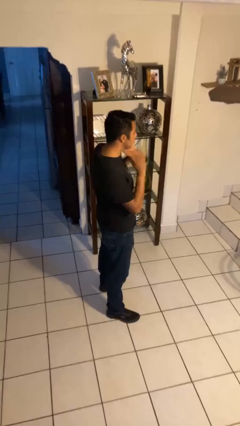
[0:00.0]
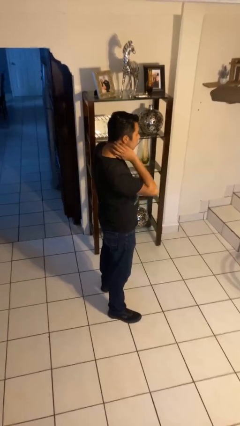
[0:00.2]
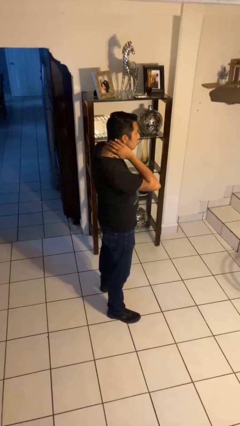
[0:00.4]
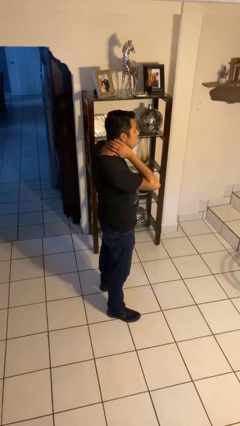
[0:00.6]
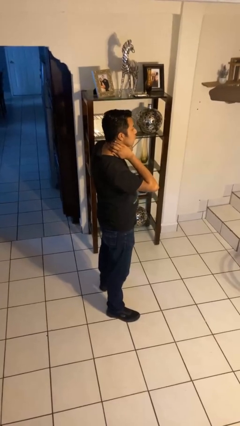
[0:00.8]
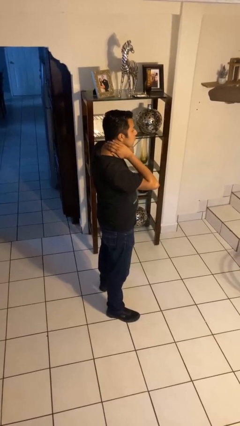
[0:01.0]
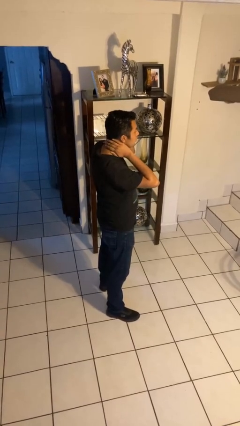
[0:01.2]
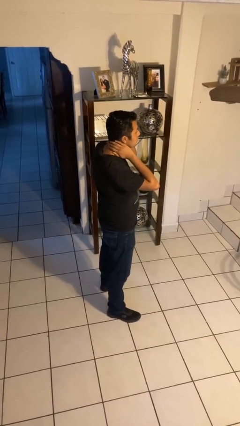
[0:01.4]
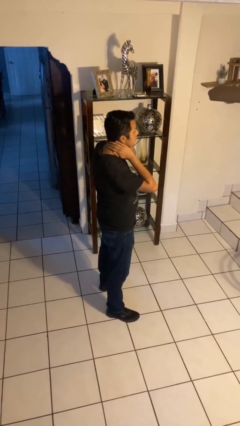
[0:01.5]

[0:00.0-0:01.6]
person rubs neck

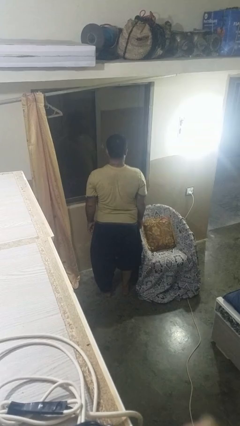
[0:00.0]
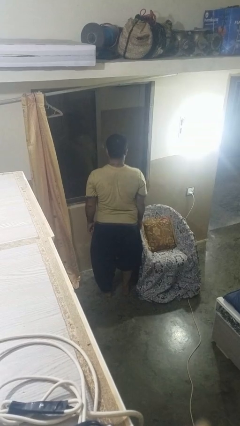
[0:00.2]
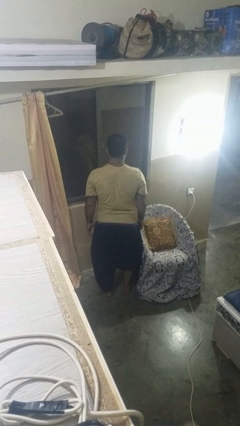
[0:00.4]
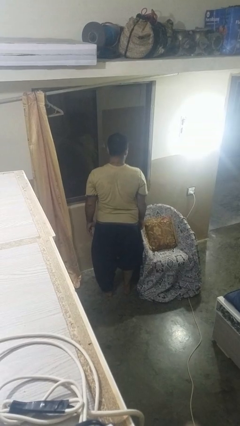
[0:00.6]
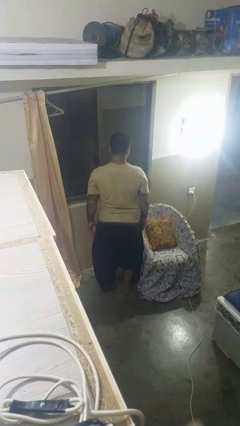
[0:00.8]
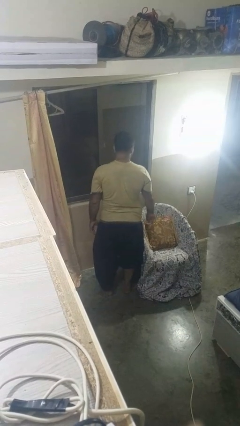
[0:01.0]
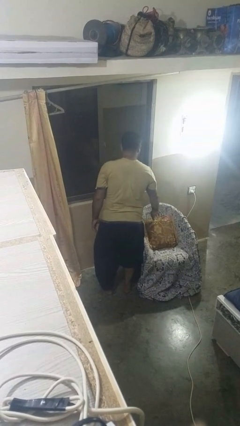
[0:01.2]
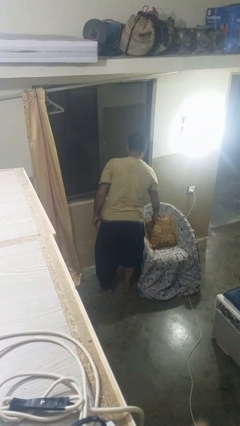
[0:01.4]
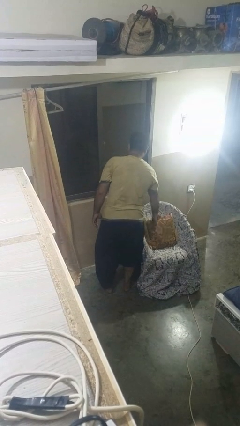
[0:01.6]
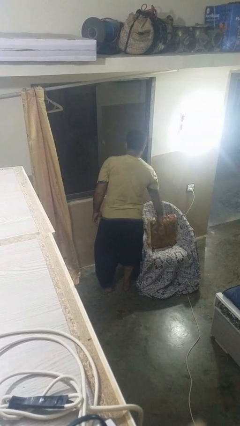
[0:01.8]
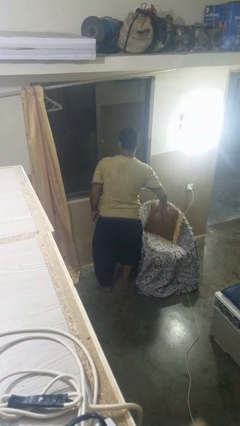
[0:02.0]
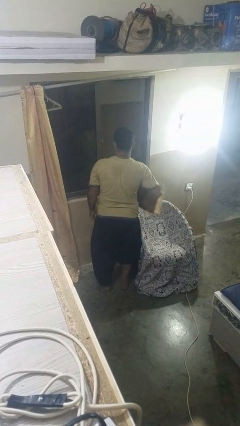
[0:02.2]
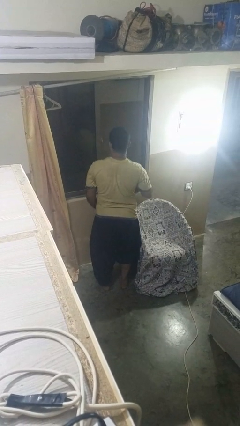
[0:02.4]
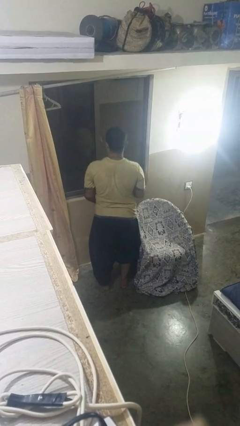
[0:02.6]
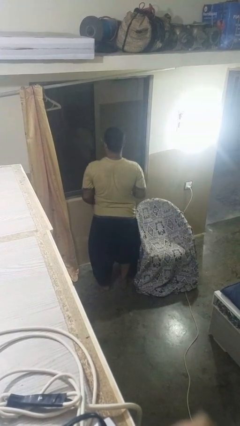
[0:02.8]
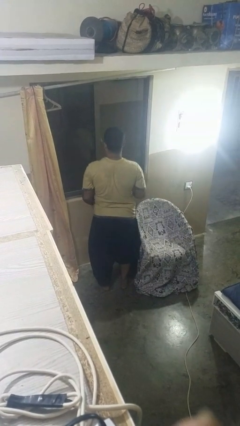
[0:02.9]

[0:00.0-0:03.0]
person picks up object from couch

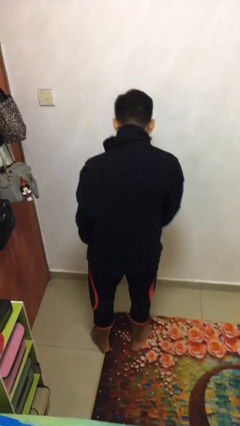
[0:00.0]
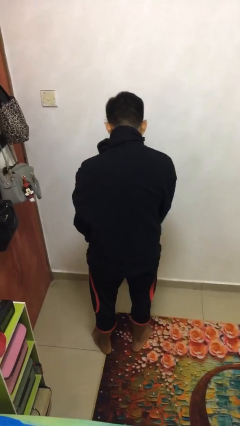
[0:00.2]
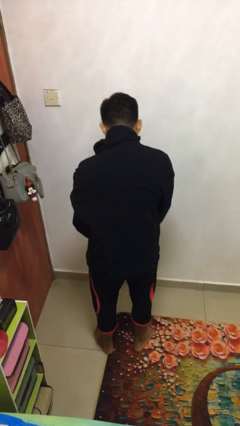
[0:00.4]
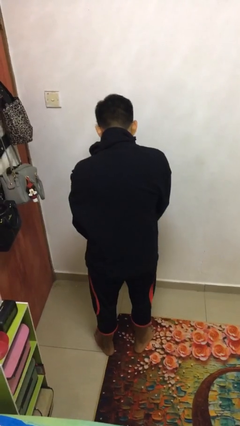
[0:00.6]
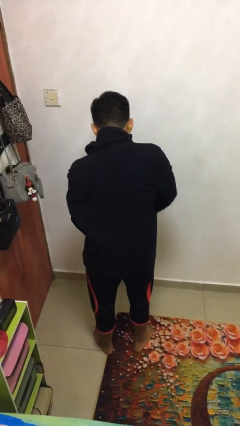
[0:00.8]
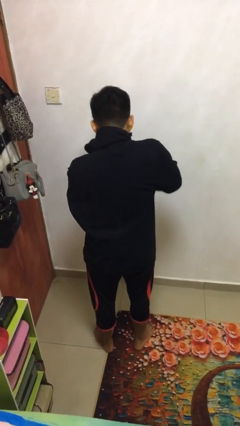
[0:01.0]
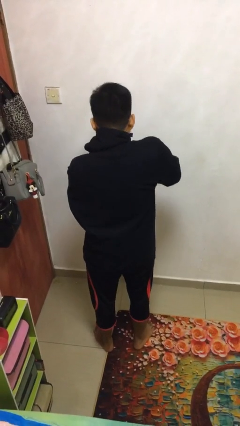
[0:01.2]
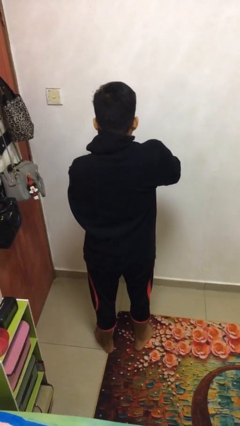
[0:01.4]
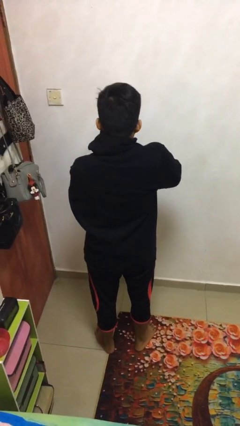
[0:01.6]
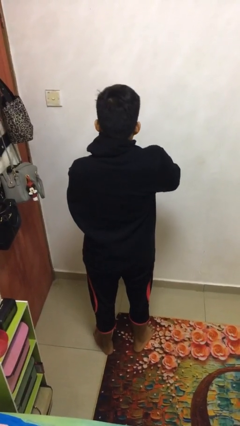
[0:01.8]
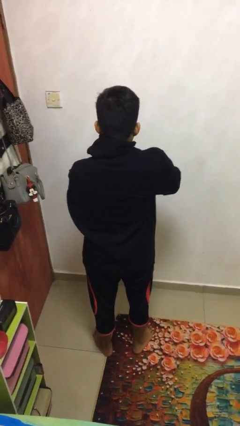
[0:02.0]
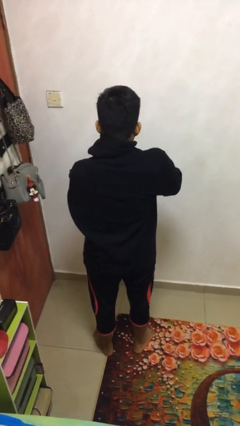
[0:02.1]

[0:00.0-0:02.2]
person zips up jacket

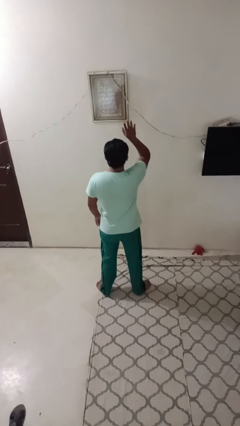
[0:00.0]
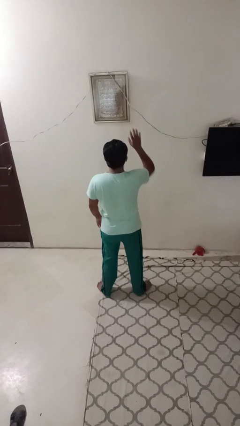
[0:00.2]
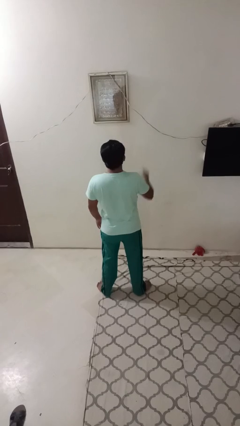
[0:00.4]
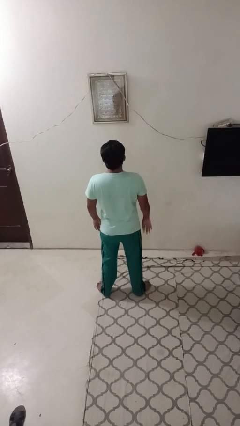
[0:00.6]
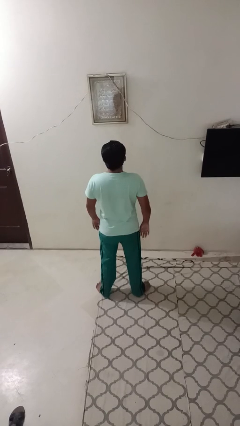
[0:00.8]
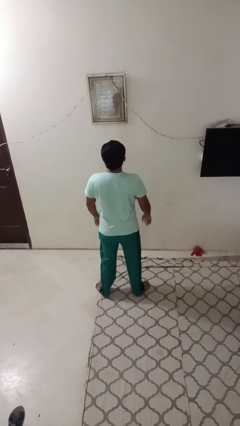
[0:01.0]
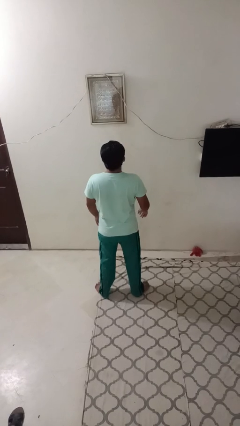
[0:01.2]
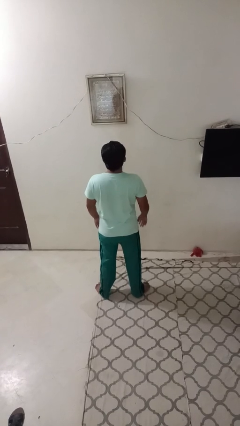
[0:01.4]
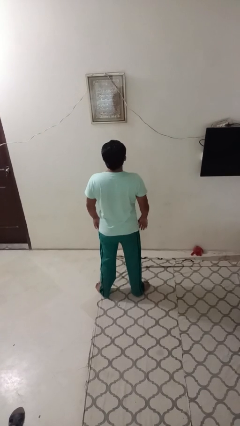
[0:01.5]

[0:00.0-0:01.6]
person gestures lower hand

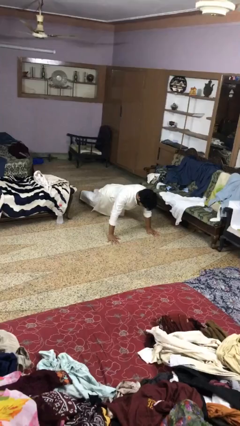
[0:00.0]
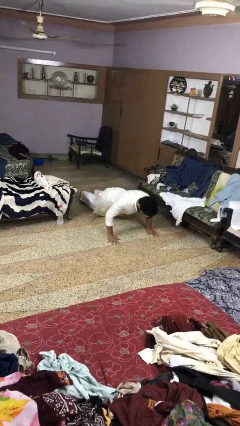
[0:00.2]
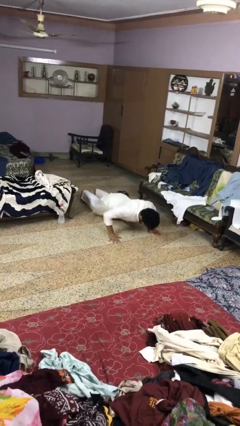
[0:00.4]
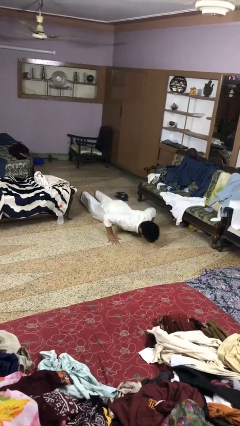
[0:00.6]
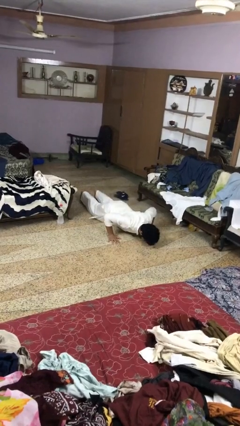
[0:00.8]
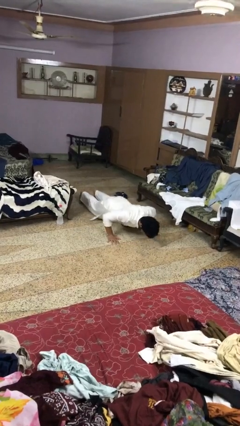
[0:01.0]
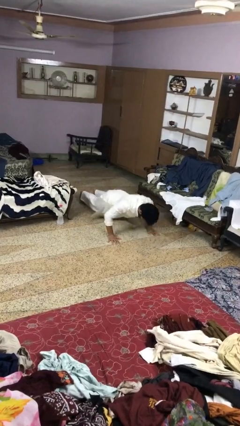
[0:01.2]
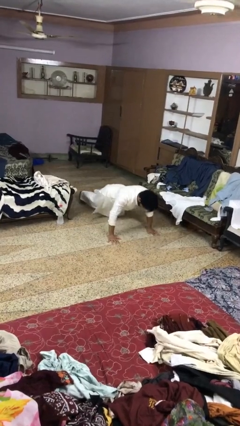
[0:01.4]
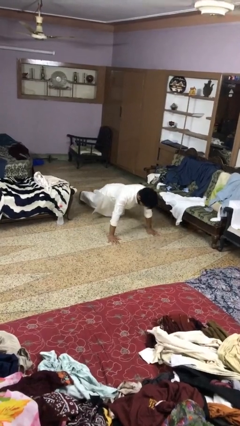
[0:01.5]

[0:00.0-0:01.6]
person exercises with pushup

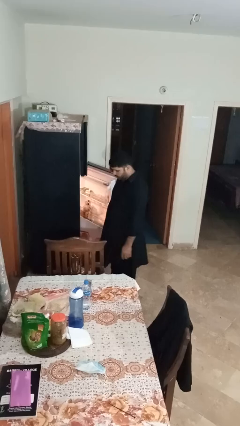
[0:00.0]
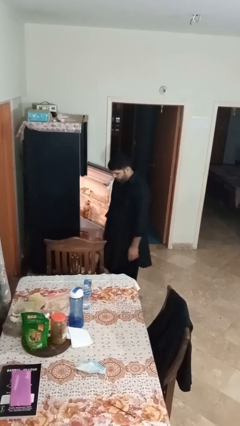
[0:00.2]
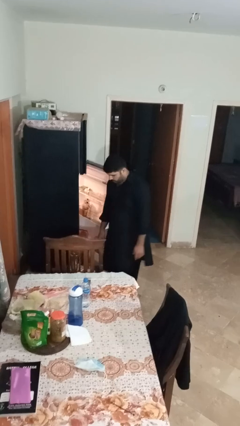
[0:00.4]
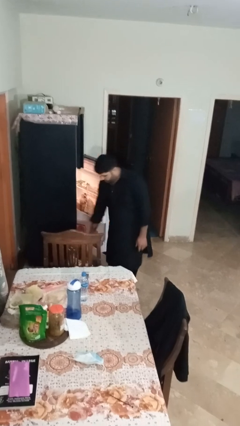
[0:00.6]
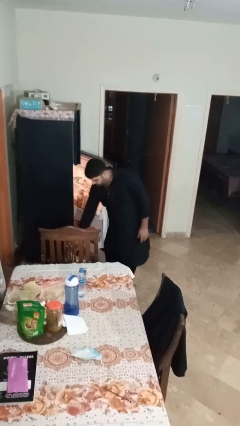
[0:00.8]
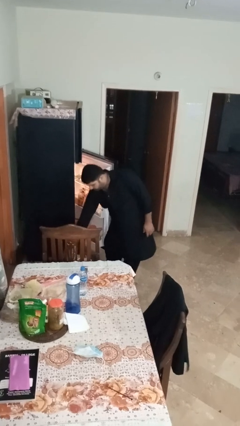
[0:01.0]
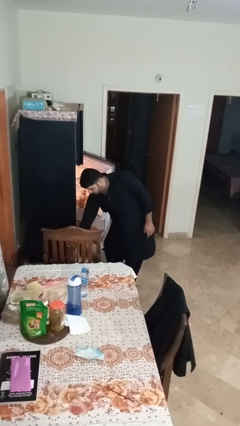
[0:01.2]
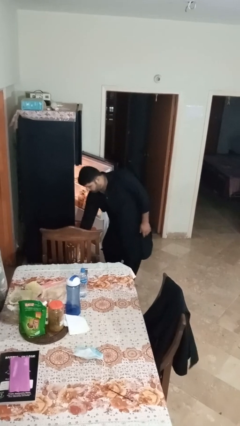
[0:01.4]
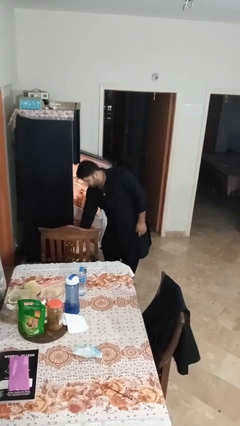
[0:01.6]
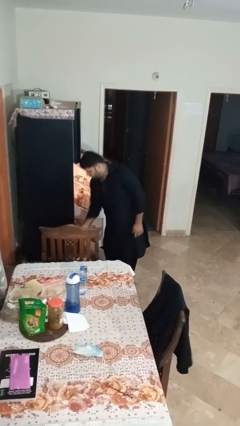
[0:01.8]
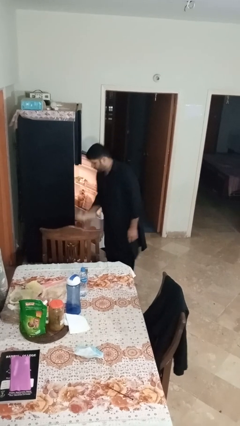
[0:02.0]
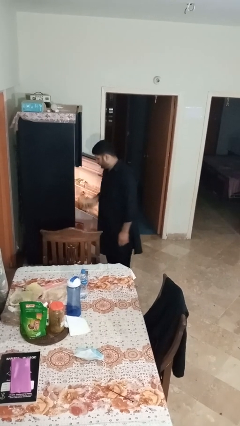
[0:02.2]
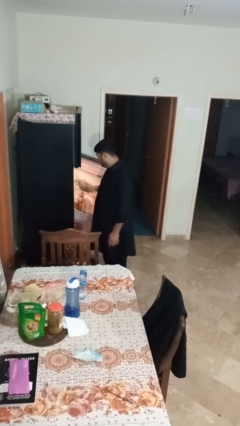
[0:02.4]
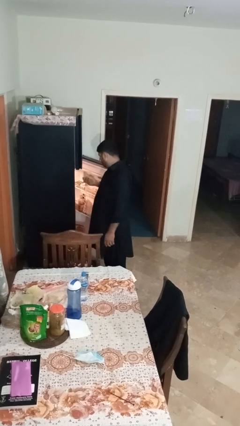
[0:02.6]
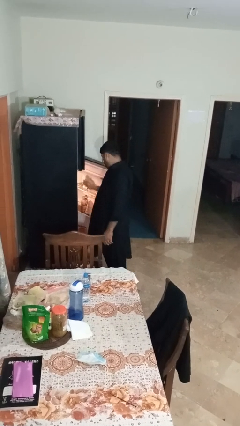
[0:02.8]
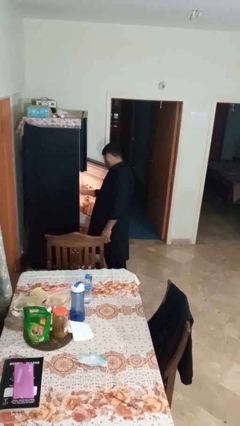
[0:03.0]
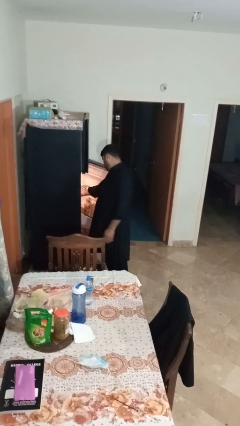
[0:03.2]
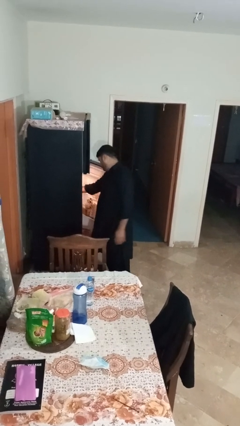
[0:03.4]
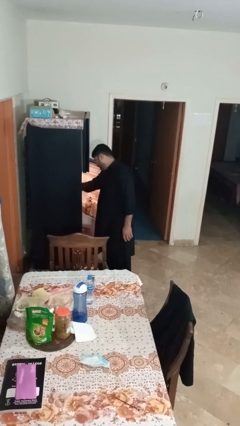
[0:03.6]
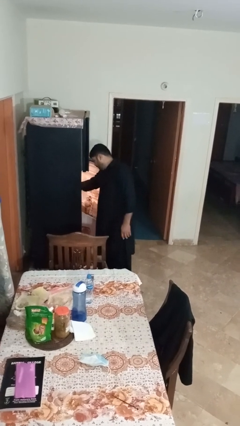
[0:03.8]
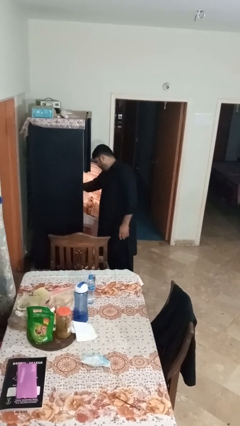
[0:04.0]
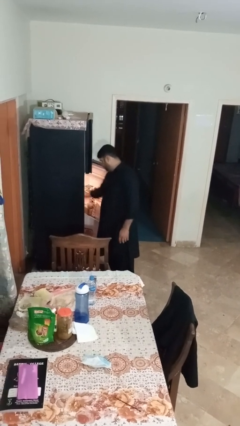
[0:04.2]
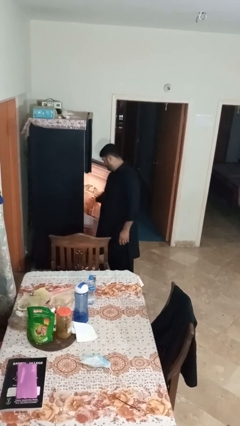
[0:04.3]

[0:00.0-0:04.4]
person loads groceries into refrigerator

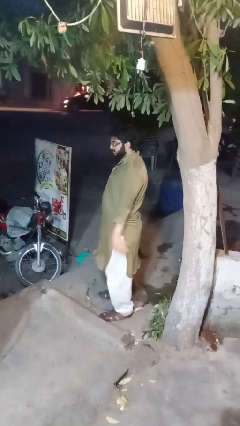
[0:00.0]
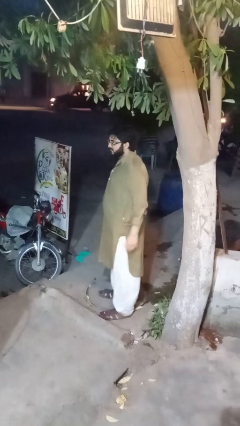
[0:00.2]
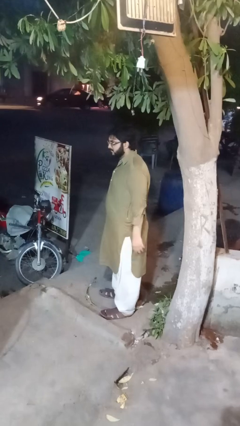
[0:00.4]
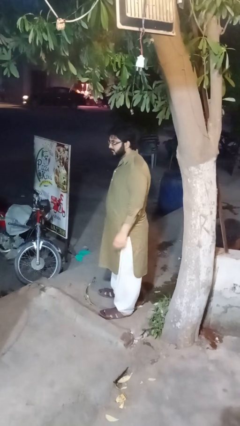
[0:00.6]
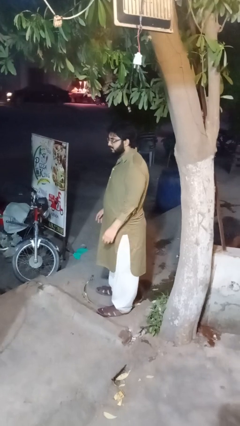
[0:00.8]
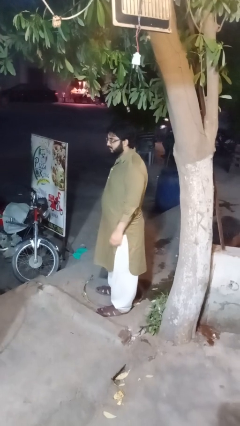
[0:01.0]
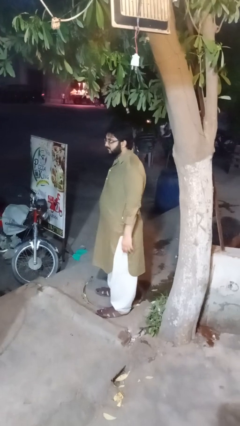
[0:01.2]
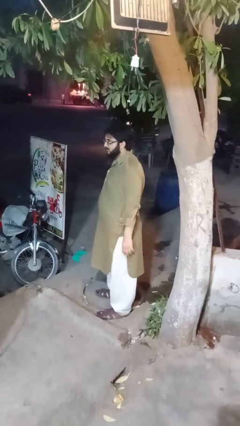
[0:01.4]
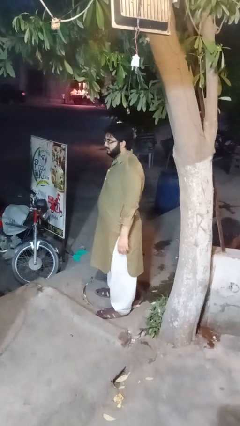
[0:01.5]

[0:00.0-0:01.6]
person jumps

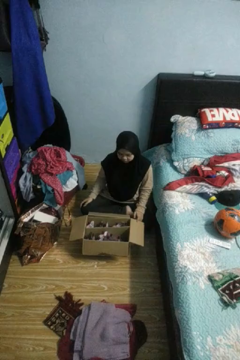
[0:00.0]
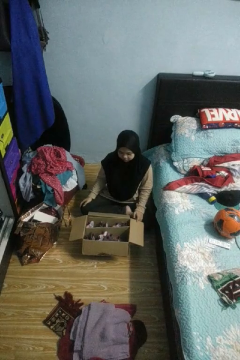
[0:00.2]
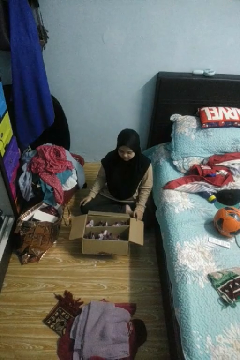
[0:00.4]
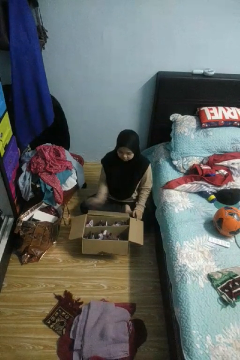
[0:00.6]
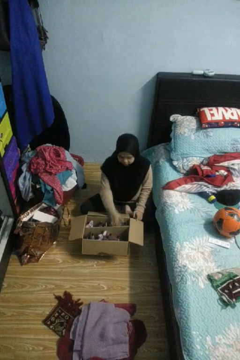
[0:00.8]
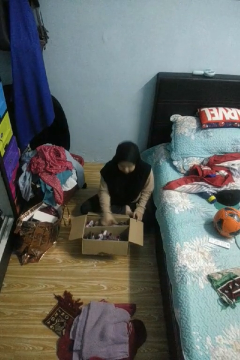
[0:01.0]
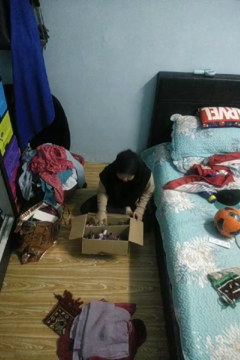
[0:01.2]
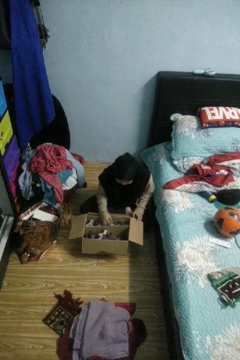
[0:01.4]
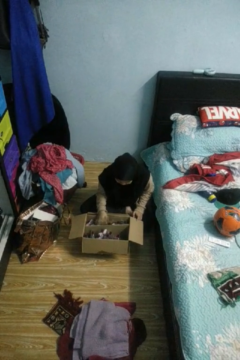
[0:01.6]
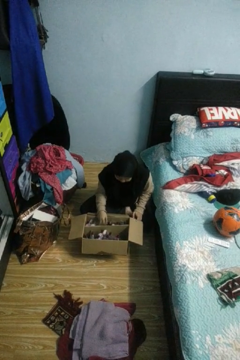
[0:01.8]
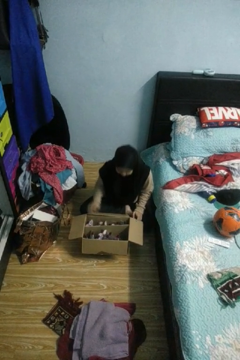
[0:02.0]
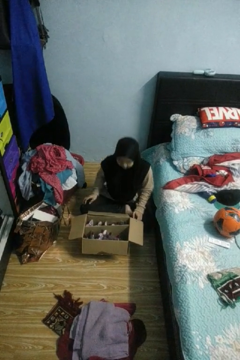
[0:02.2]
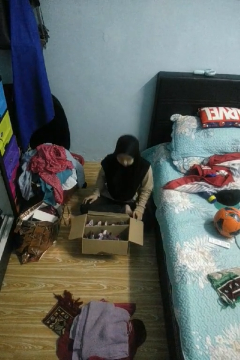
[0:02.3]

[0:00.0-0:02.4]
person searches in box
